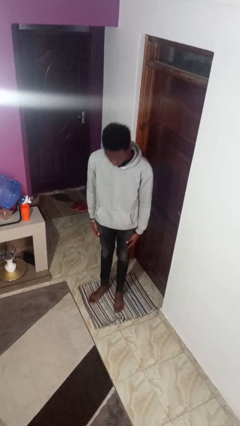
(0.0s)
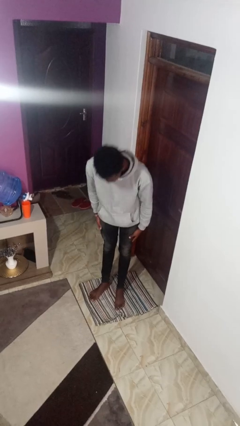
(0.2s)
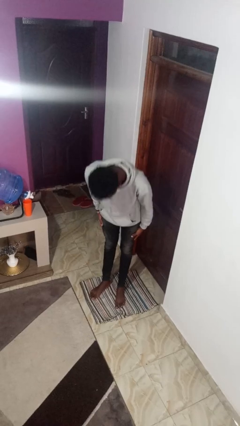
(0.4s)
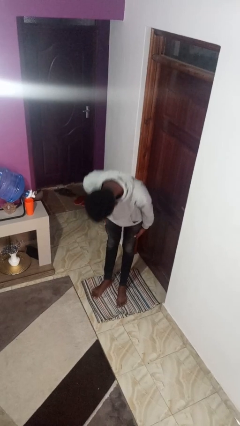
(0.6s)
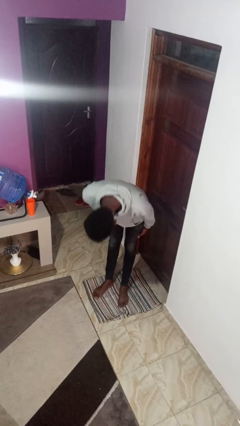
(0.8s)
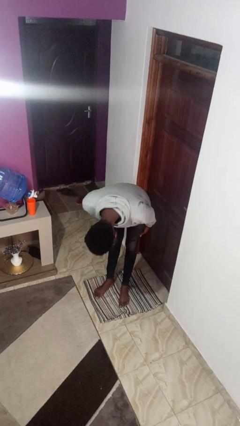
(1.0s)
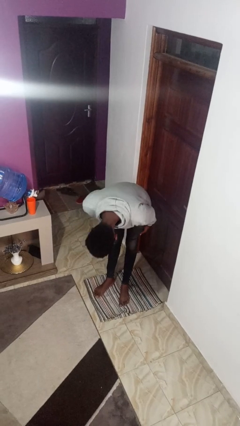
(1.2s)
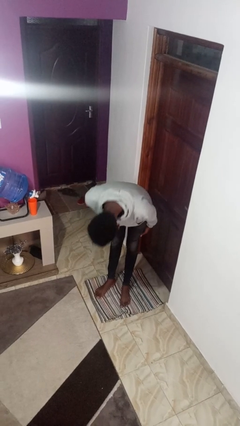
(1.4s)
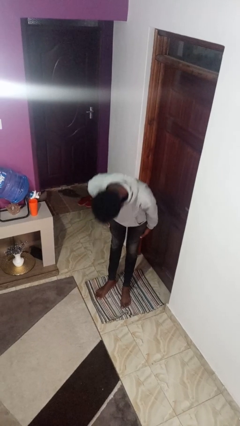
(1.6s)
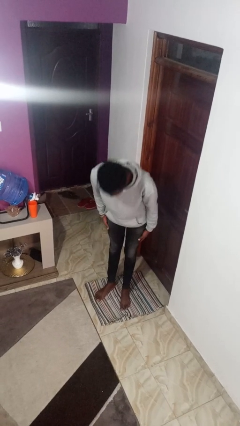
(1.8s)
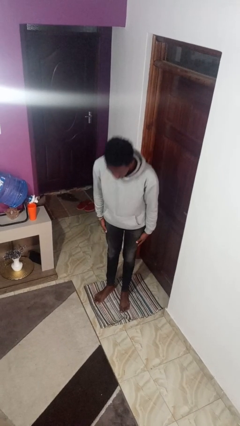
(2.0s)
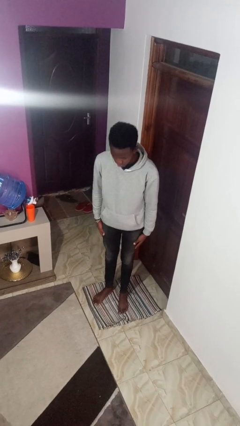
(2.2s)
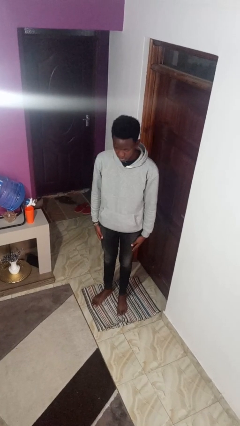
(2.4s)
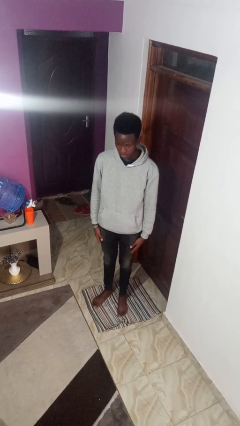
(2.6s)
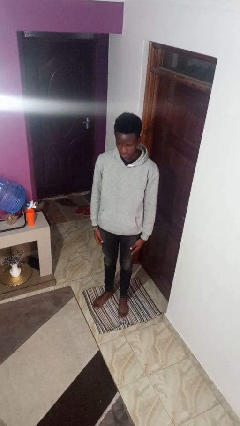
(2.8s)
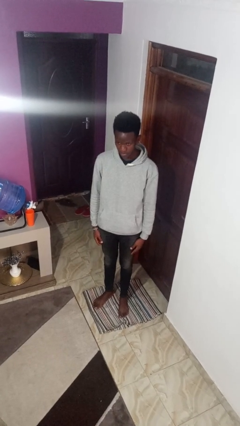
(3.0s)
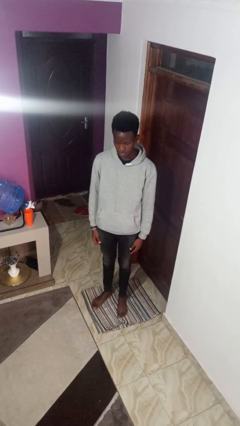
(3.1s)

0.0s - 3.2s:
person bows

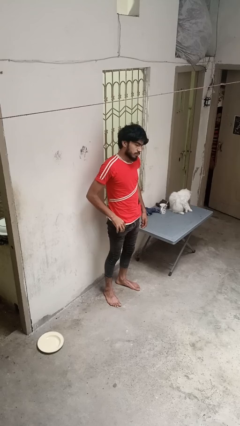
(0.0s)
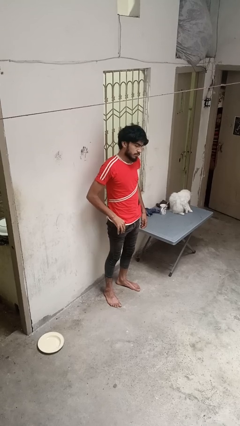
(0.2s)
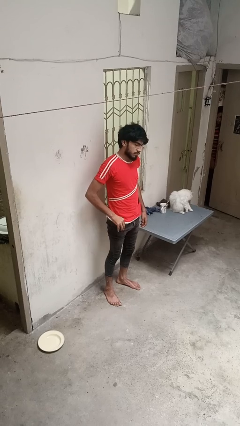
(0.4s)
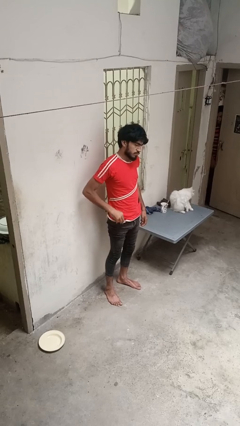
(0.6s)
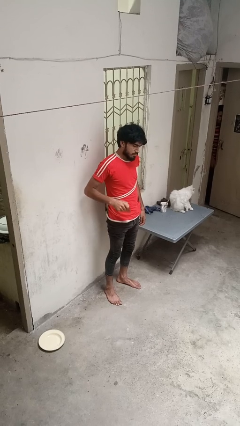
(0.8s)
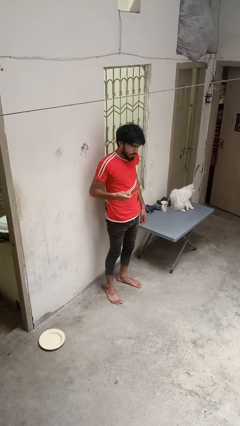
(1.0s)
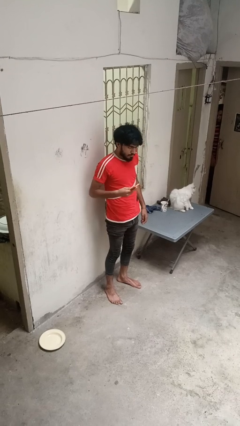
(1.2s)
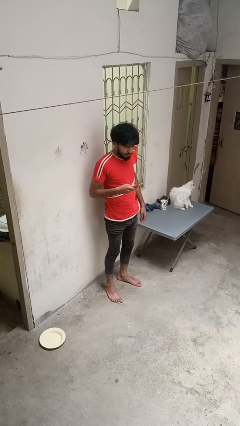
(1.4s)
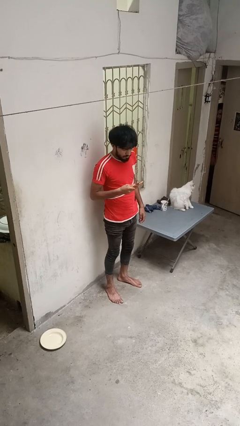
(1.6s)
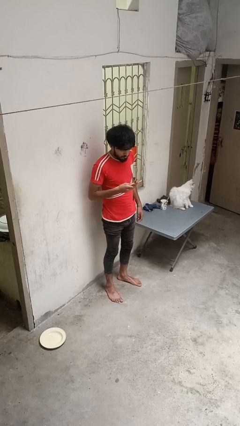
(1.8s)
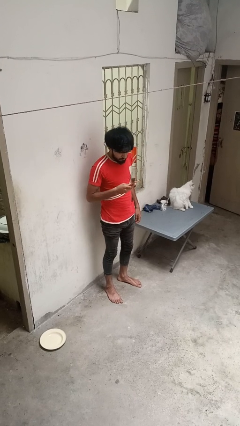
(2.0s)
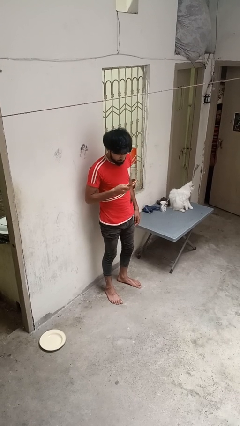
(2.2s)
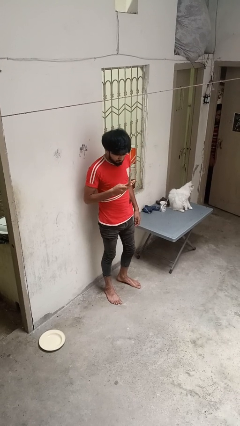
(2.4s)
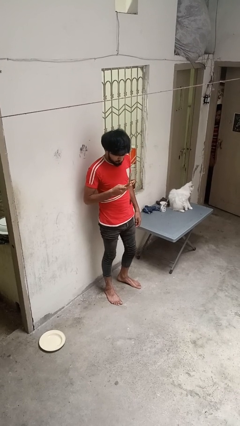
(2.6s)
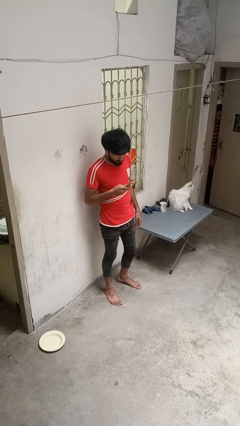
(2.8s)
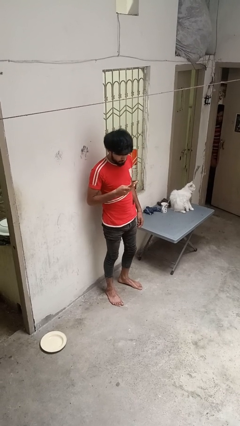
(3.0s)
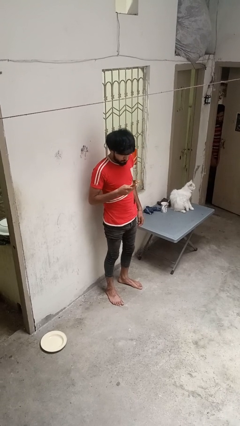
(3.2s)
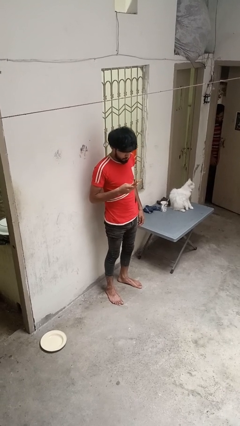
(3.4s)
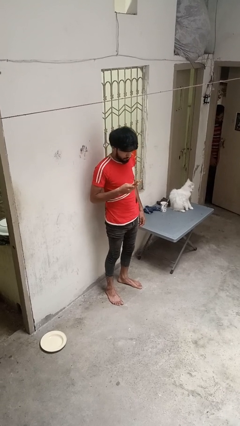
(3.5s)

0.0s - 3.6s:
person takes phone from pocket

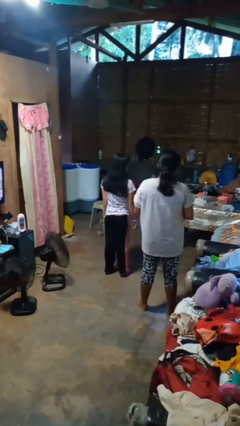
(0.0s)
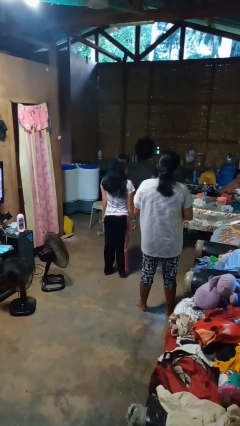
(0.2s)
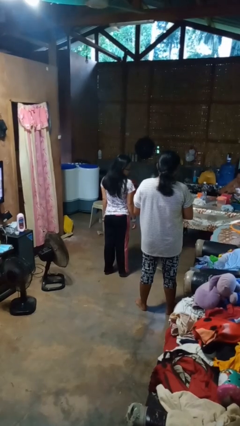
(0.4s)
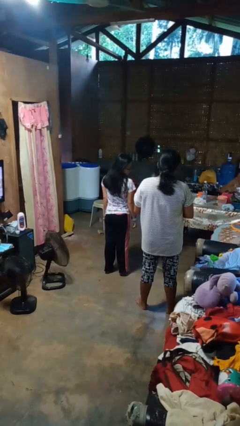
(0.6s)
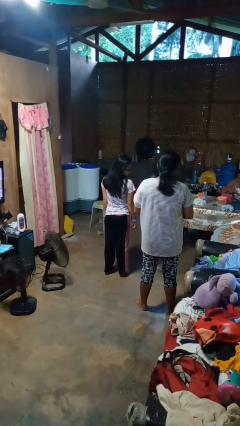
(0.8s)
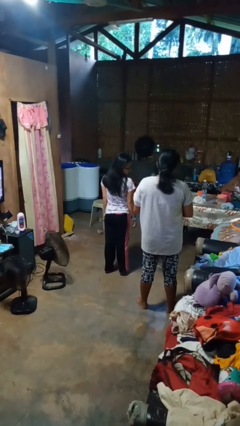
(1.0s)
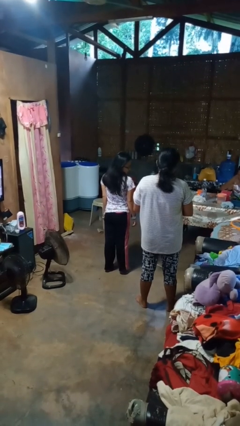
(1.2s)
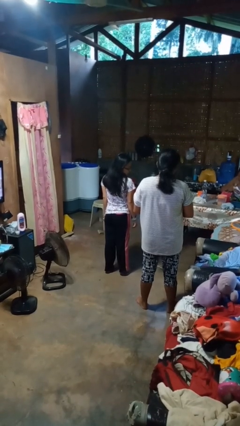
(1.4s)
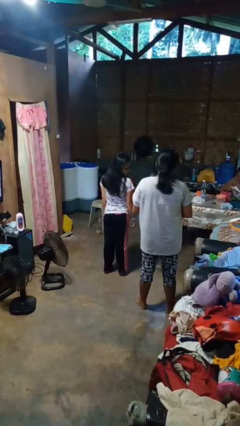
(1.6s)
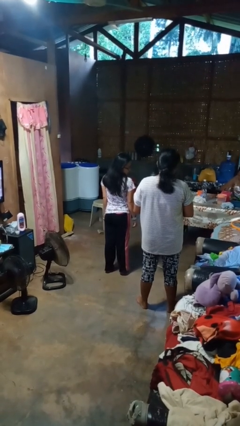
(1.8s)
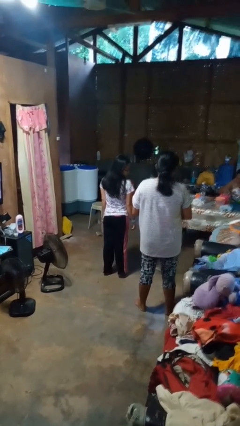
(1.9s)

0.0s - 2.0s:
person looks over shoulder

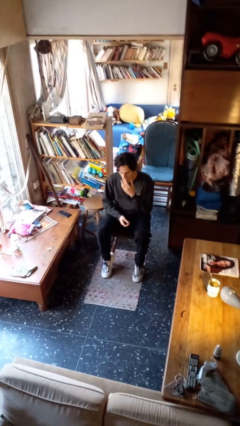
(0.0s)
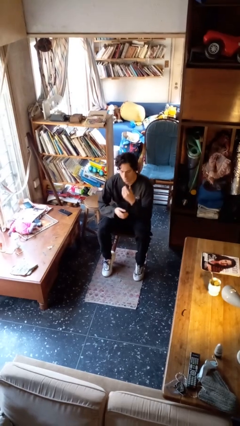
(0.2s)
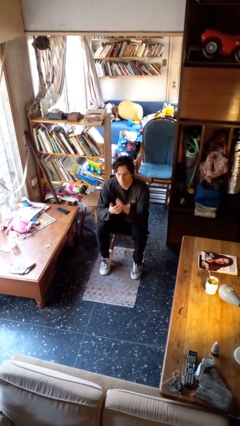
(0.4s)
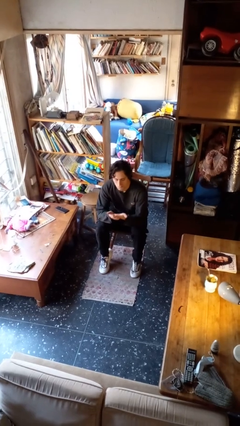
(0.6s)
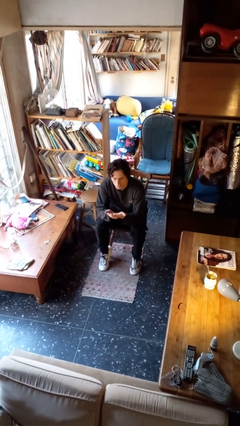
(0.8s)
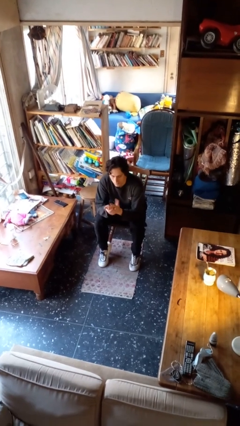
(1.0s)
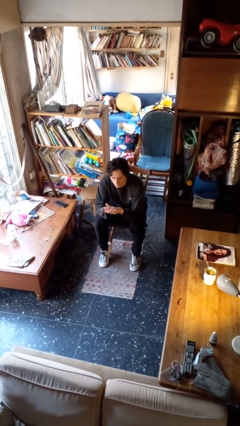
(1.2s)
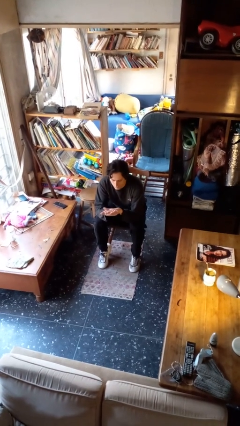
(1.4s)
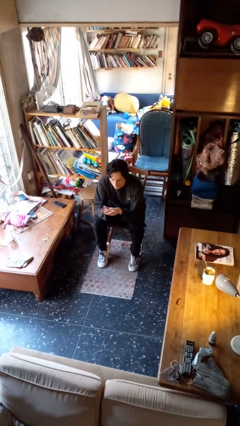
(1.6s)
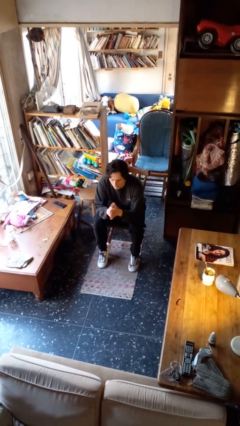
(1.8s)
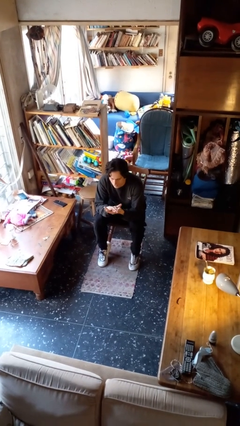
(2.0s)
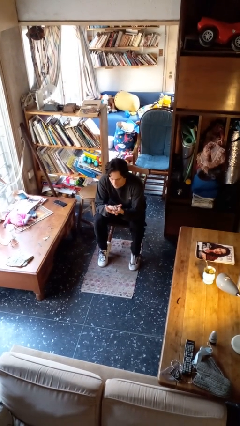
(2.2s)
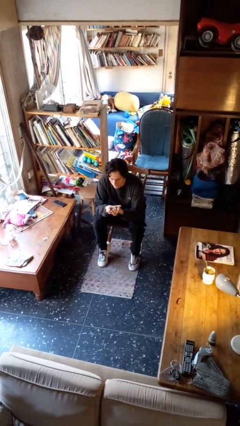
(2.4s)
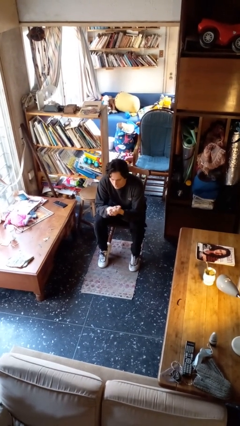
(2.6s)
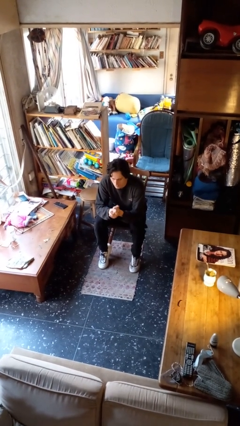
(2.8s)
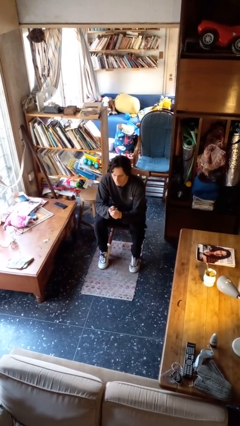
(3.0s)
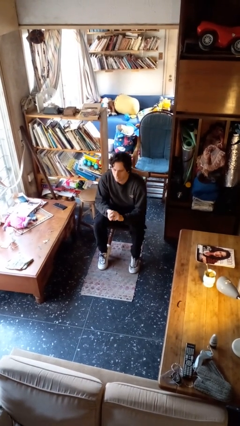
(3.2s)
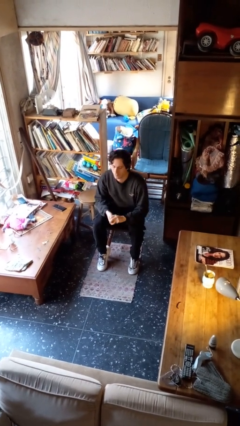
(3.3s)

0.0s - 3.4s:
person looks at hands in lap

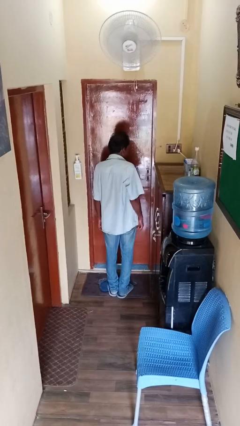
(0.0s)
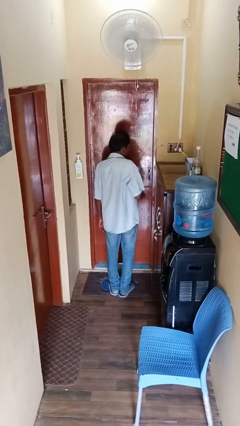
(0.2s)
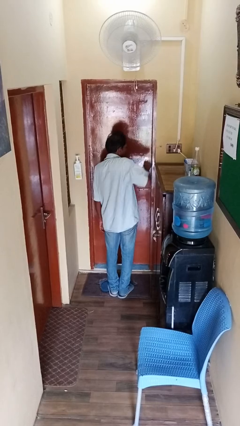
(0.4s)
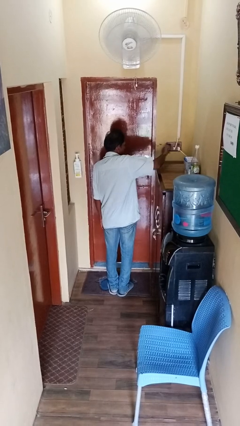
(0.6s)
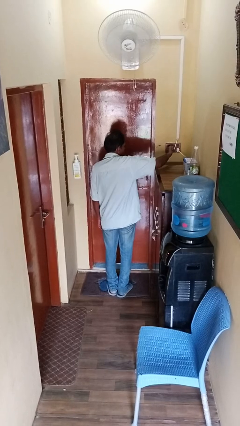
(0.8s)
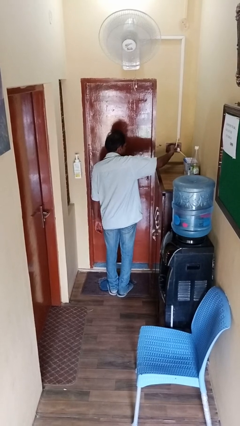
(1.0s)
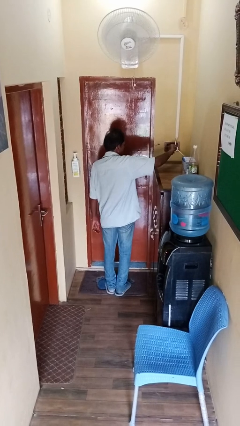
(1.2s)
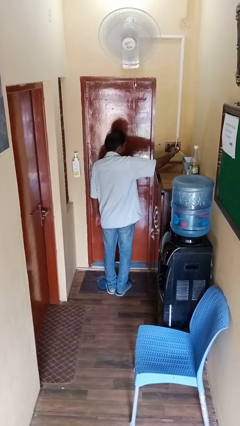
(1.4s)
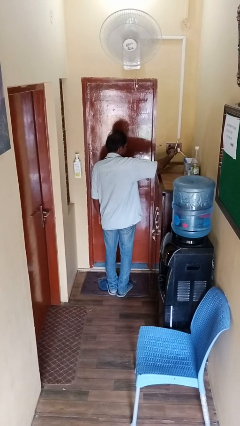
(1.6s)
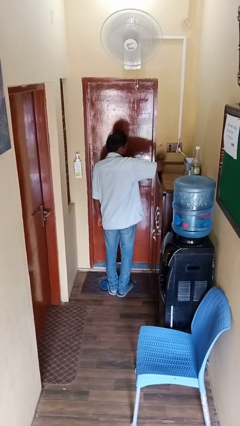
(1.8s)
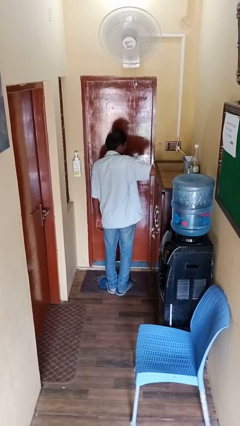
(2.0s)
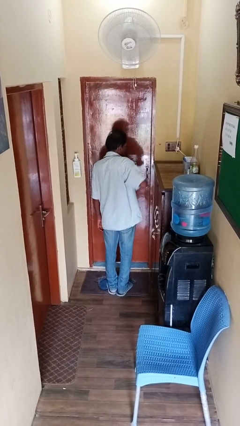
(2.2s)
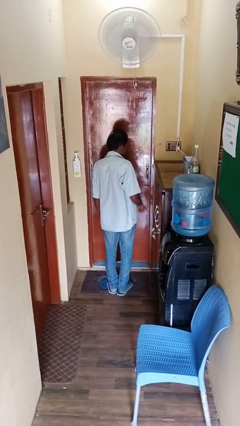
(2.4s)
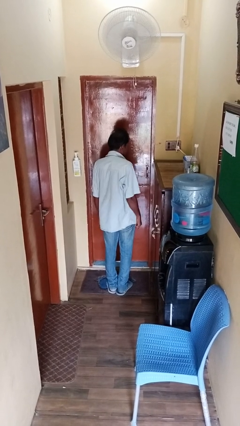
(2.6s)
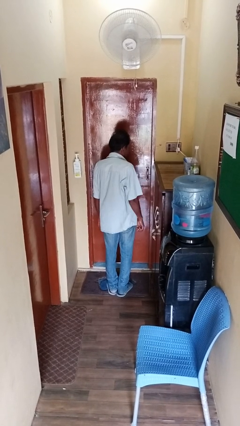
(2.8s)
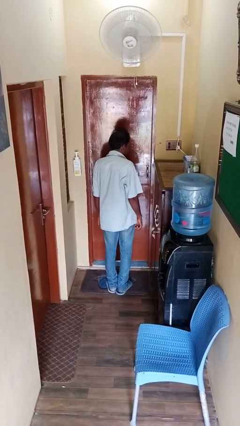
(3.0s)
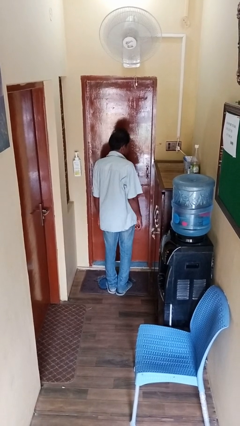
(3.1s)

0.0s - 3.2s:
person turns off fan

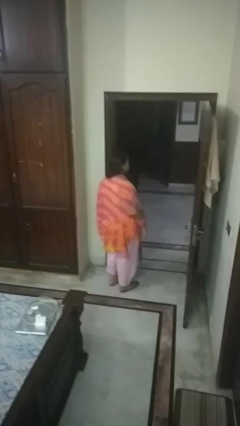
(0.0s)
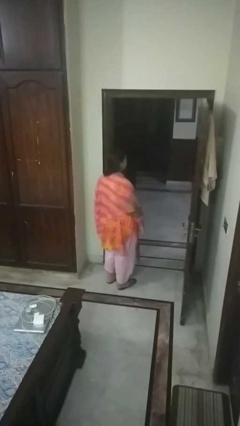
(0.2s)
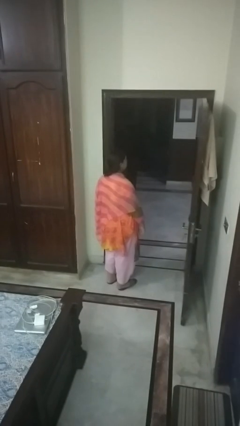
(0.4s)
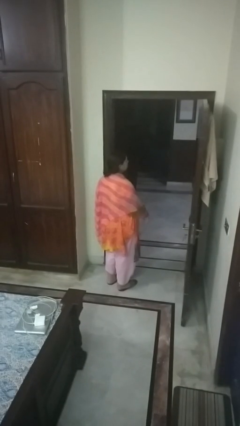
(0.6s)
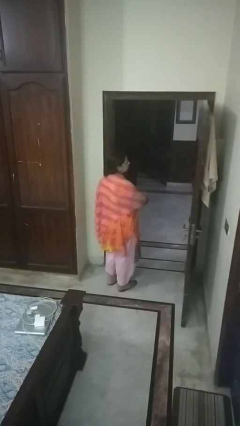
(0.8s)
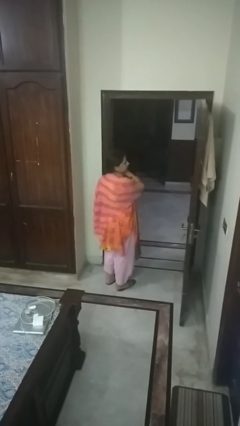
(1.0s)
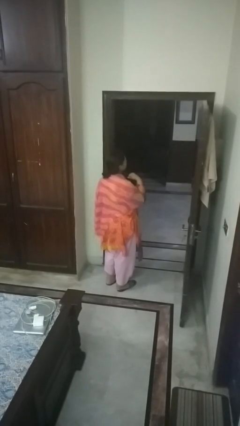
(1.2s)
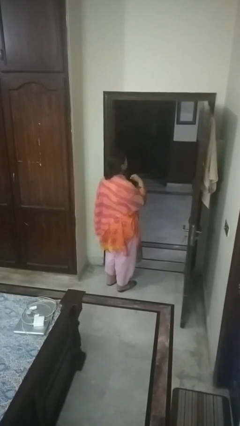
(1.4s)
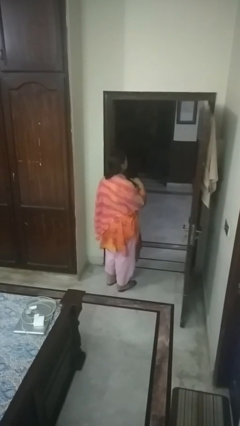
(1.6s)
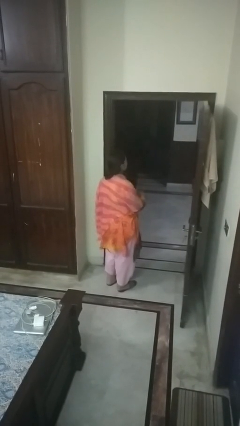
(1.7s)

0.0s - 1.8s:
person gestures cut

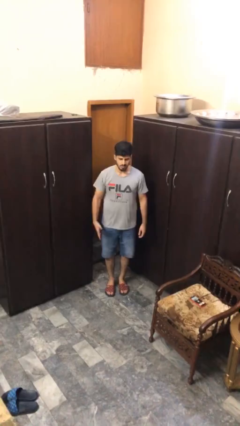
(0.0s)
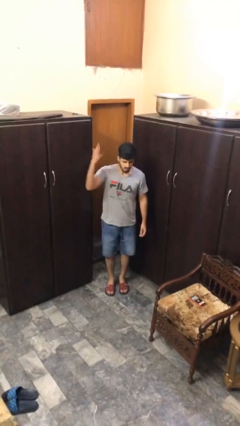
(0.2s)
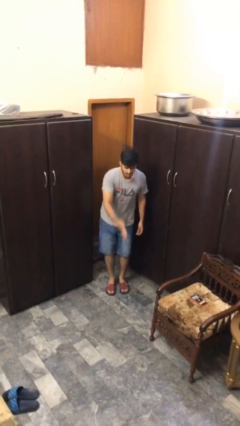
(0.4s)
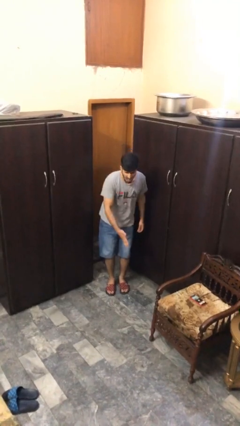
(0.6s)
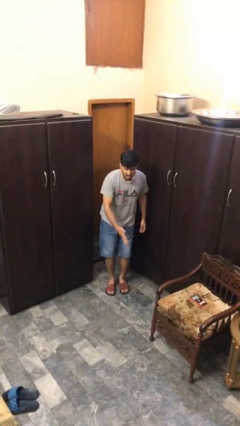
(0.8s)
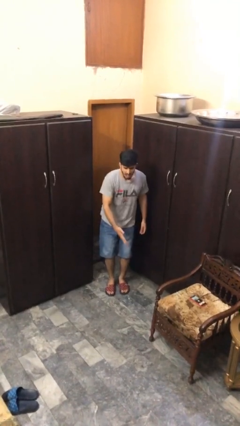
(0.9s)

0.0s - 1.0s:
person karate chop
